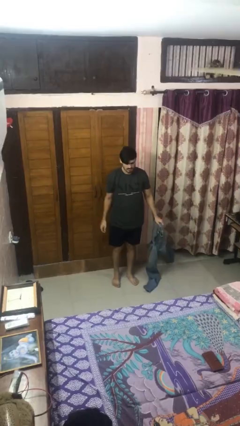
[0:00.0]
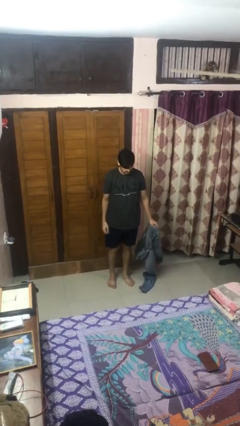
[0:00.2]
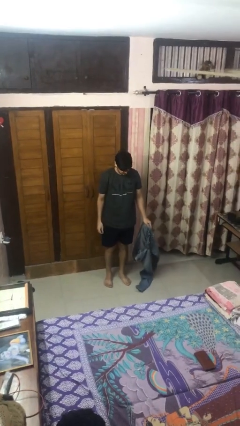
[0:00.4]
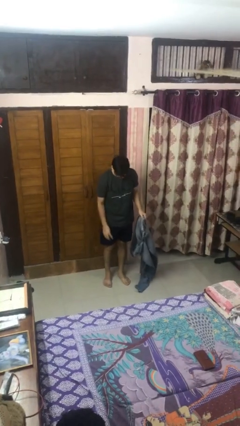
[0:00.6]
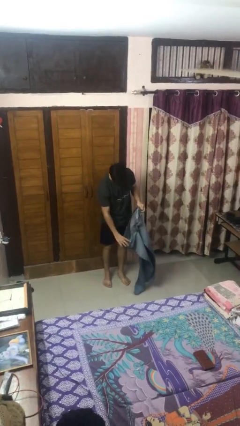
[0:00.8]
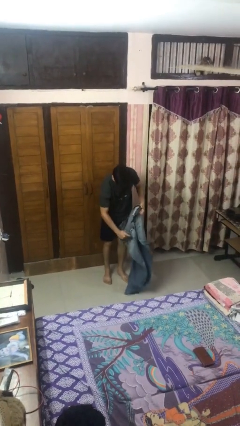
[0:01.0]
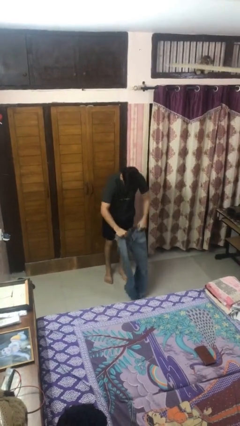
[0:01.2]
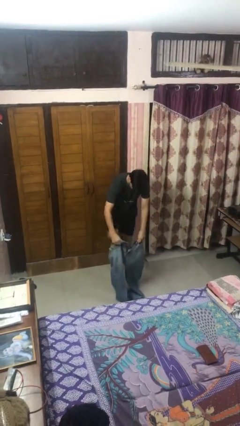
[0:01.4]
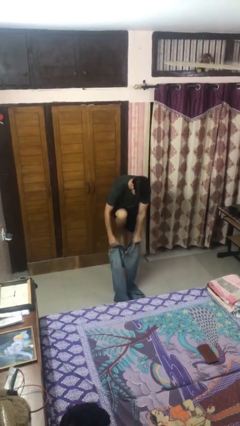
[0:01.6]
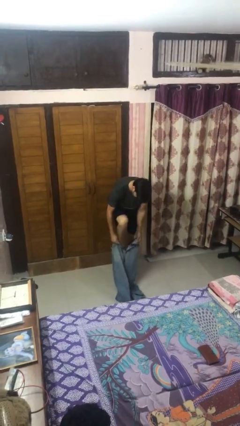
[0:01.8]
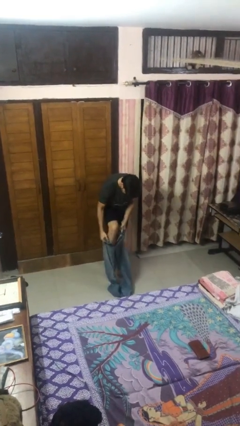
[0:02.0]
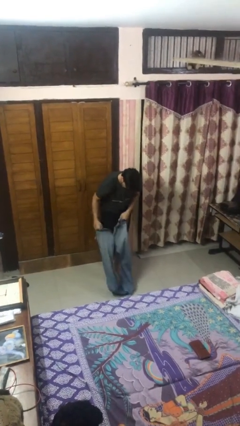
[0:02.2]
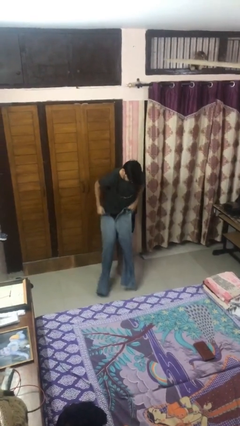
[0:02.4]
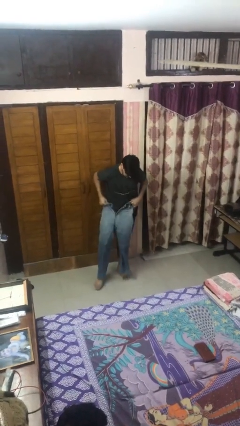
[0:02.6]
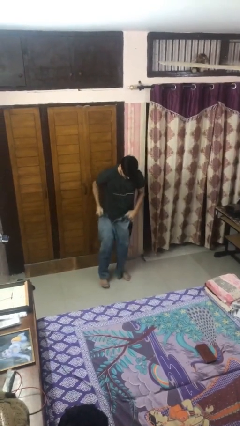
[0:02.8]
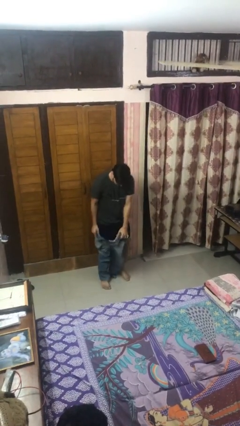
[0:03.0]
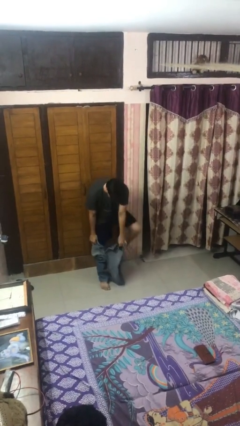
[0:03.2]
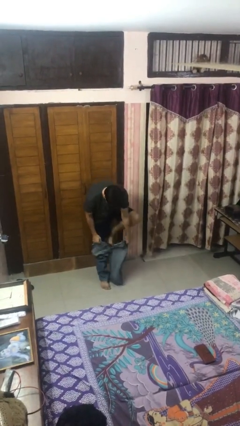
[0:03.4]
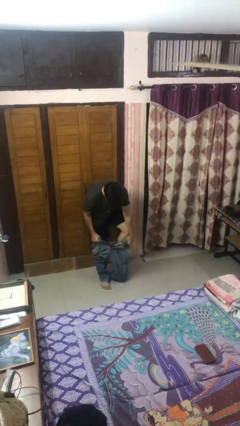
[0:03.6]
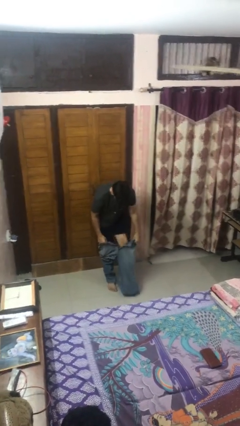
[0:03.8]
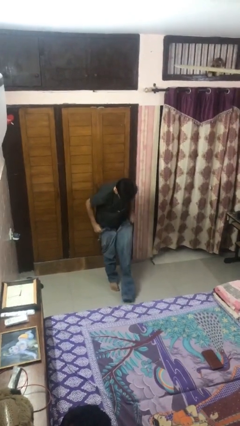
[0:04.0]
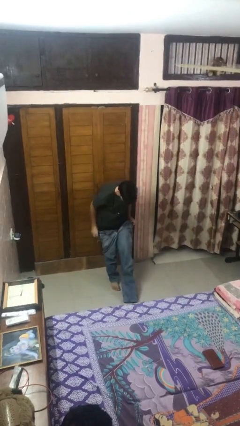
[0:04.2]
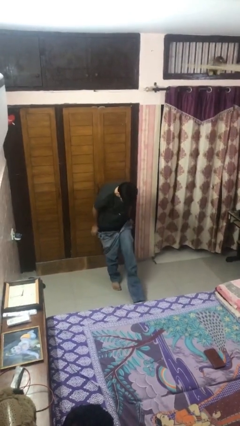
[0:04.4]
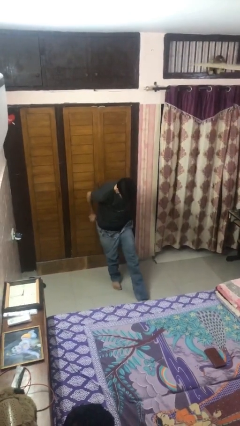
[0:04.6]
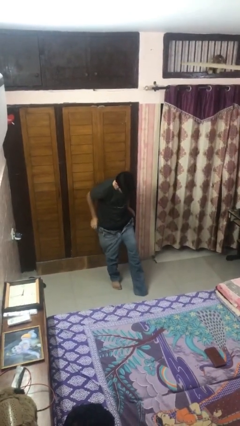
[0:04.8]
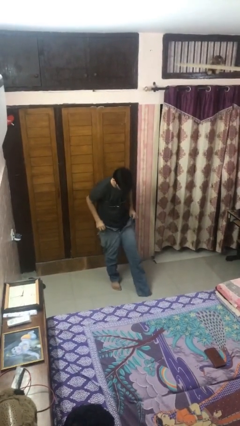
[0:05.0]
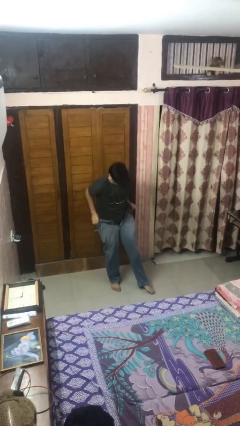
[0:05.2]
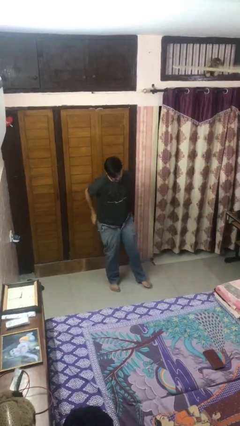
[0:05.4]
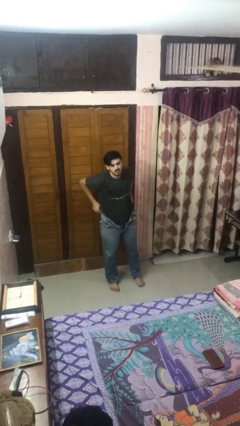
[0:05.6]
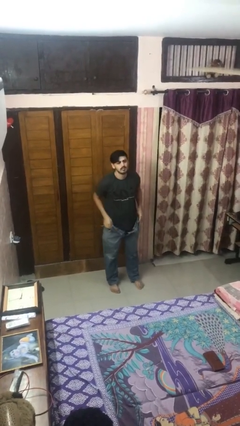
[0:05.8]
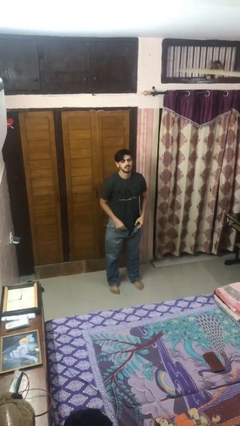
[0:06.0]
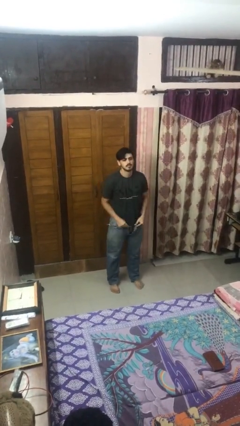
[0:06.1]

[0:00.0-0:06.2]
person puts on pants

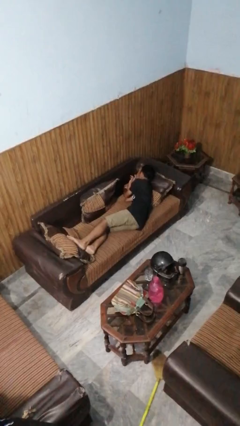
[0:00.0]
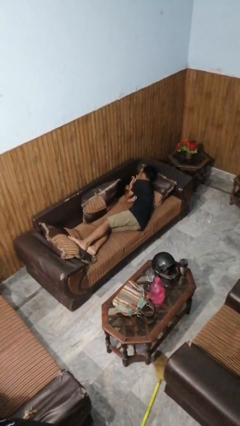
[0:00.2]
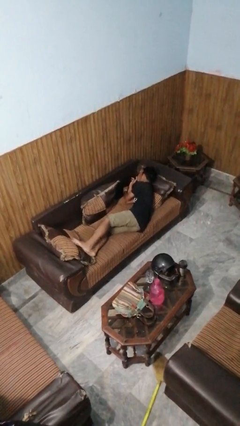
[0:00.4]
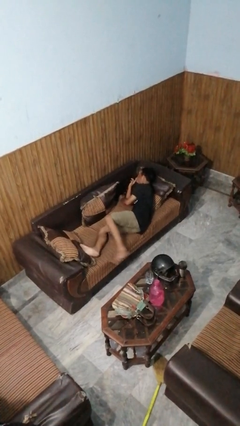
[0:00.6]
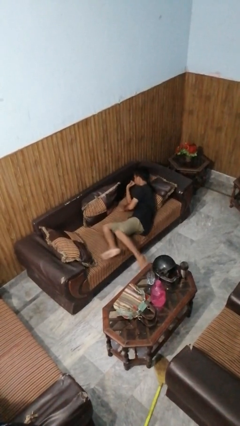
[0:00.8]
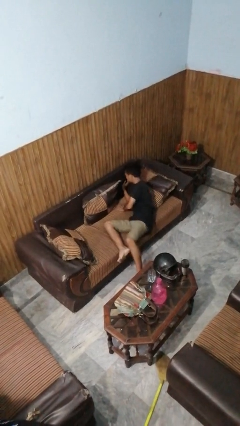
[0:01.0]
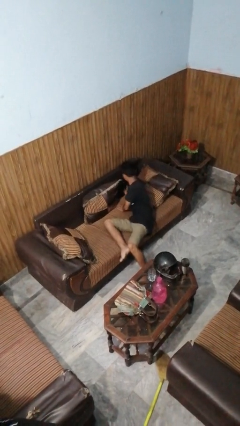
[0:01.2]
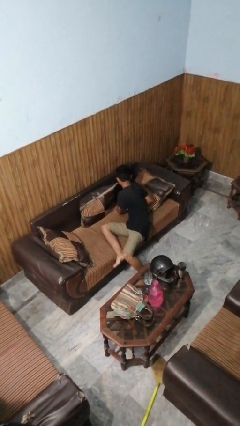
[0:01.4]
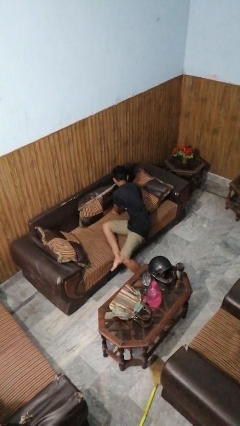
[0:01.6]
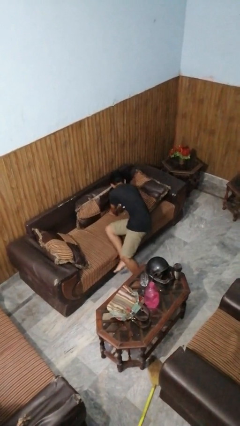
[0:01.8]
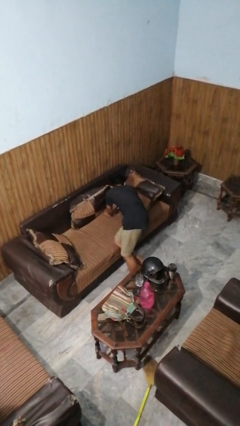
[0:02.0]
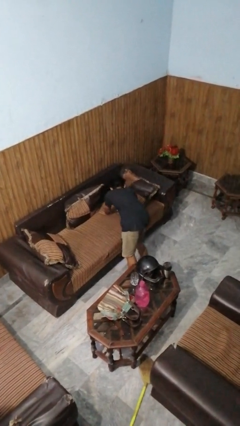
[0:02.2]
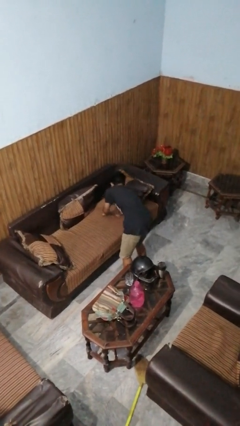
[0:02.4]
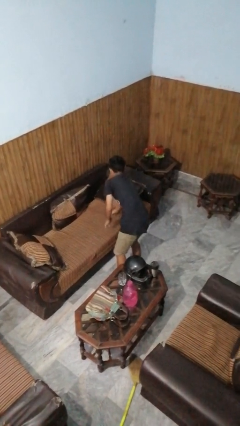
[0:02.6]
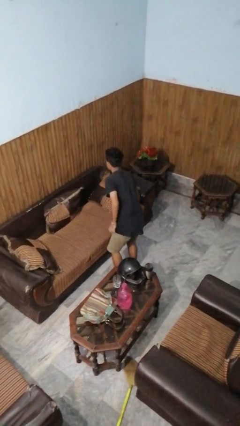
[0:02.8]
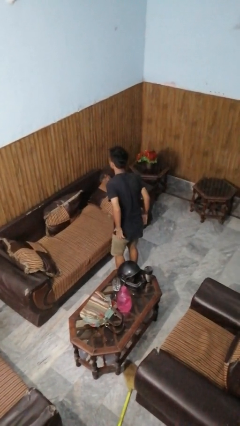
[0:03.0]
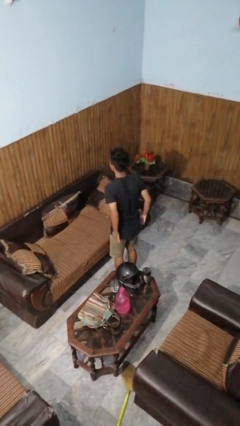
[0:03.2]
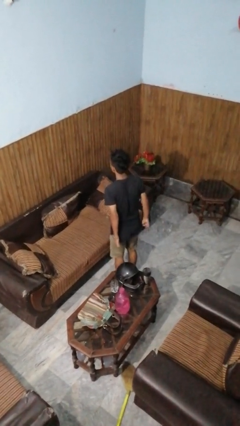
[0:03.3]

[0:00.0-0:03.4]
person stands up

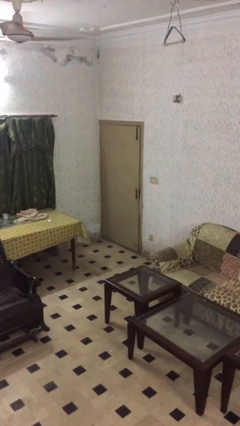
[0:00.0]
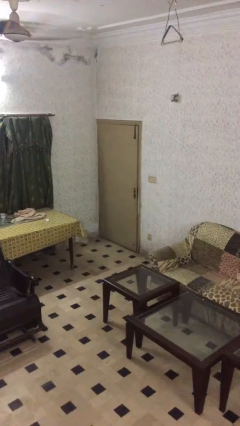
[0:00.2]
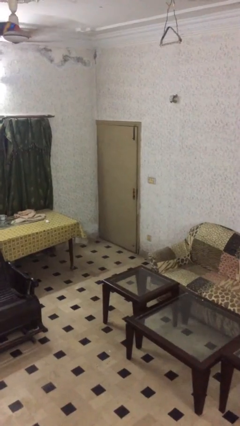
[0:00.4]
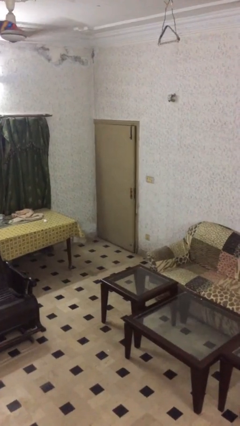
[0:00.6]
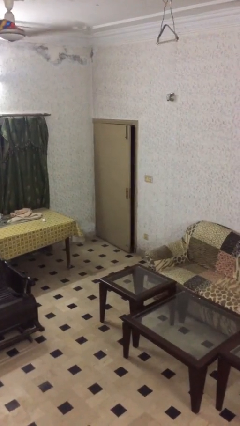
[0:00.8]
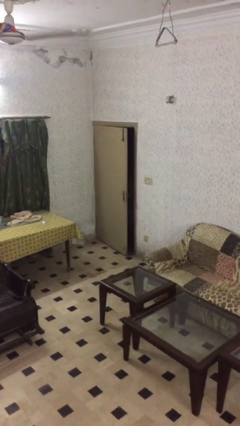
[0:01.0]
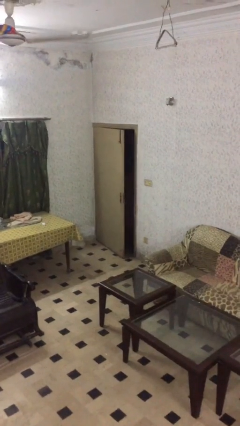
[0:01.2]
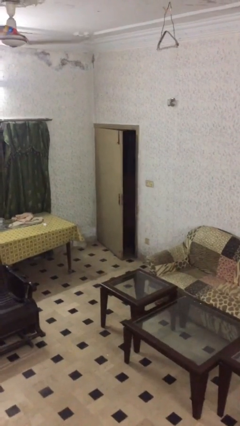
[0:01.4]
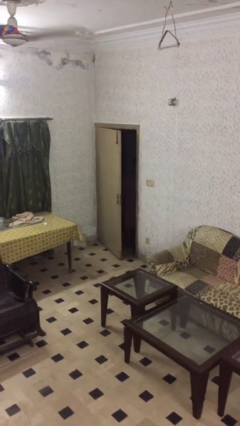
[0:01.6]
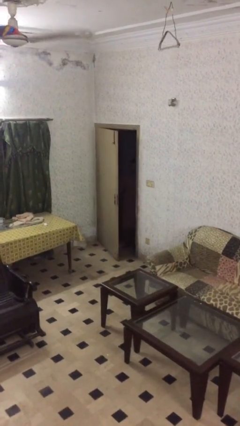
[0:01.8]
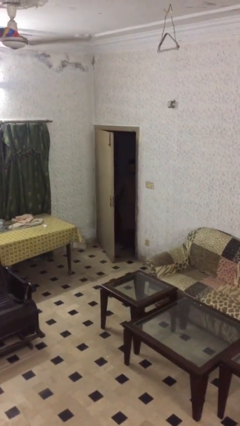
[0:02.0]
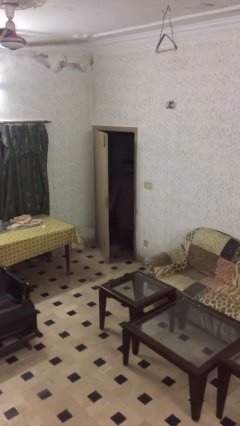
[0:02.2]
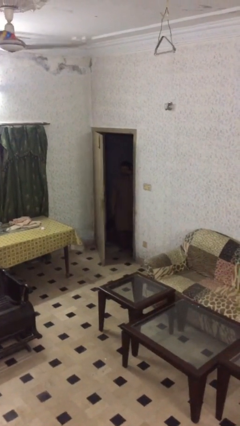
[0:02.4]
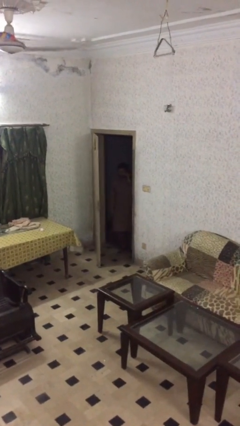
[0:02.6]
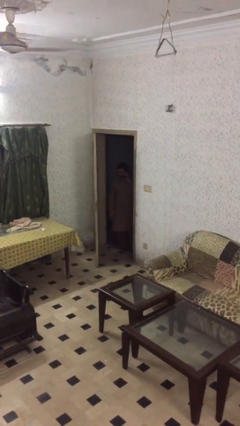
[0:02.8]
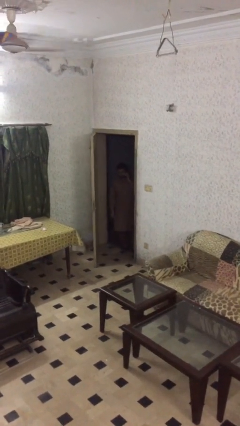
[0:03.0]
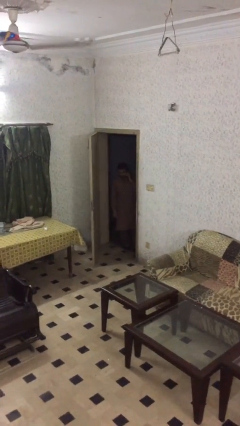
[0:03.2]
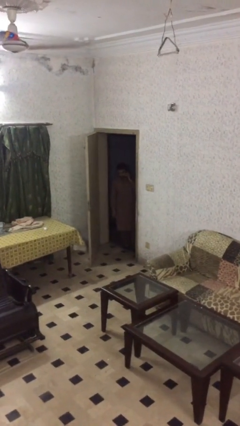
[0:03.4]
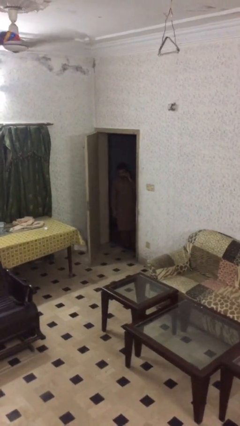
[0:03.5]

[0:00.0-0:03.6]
person opens facility door

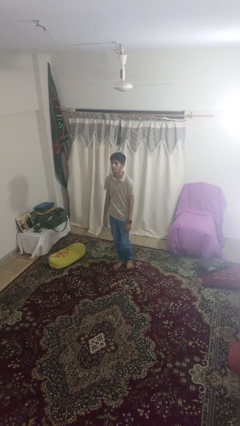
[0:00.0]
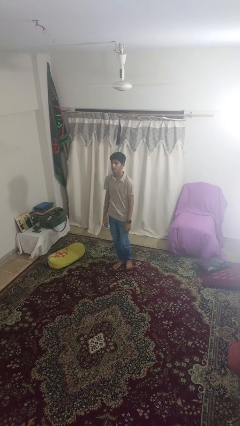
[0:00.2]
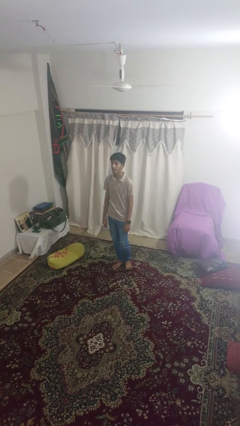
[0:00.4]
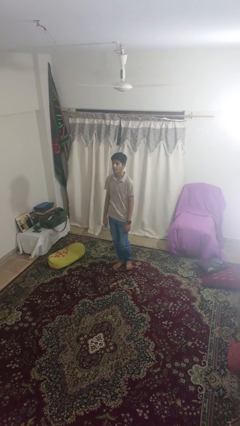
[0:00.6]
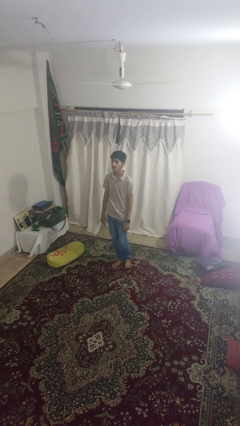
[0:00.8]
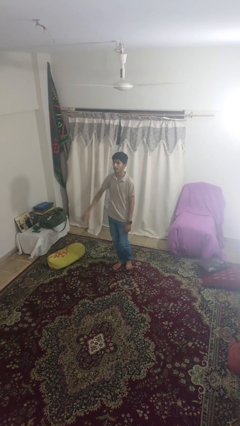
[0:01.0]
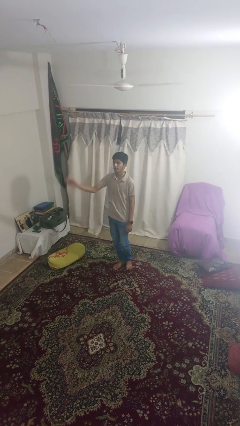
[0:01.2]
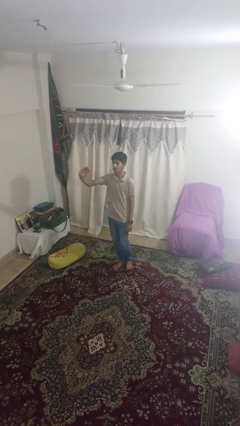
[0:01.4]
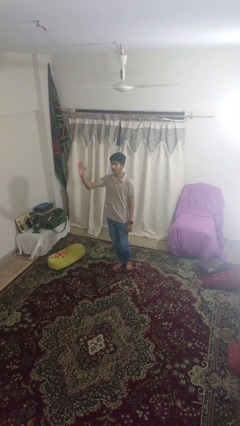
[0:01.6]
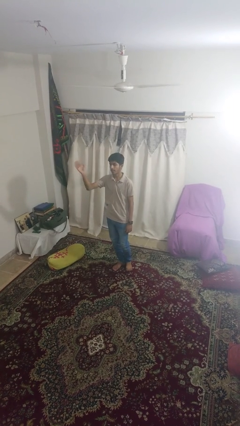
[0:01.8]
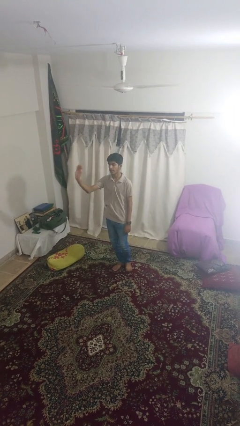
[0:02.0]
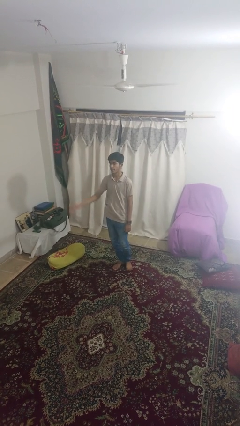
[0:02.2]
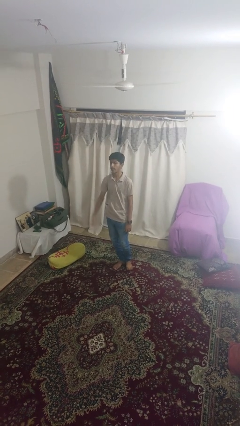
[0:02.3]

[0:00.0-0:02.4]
person waves at person

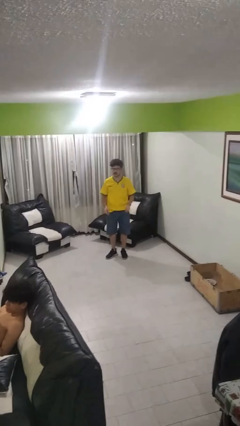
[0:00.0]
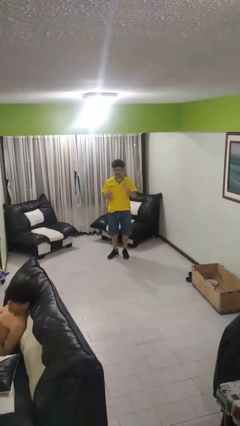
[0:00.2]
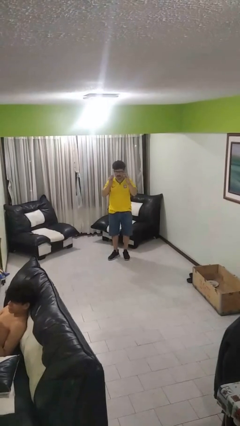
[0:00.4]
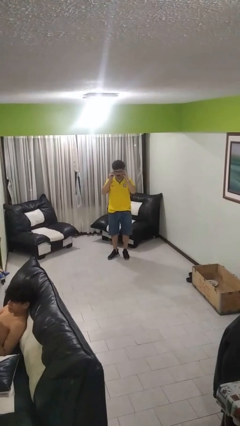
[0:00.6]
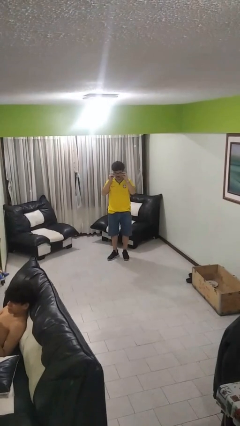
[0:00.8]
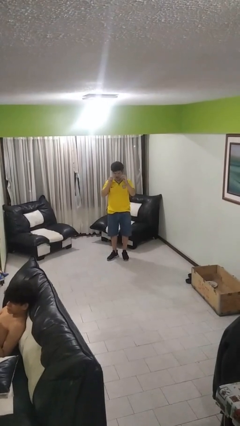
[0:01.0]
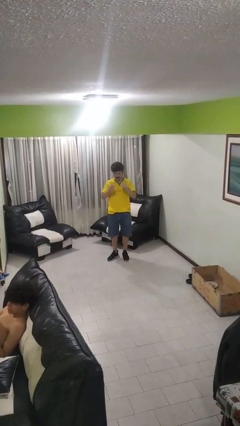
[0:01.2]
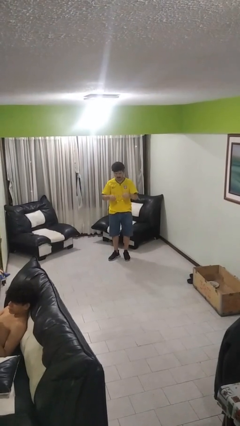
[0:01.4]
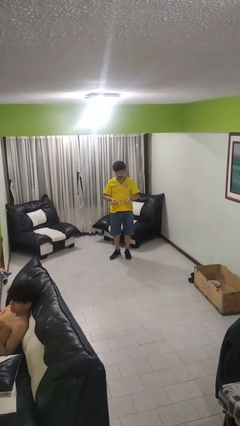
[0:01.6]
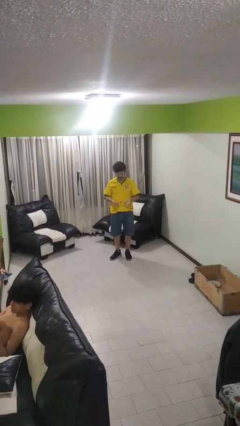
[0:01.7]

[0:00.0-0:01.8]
person takes off glasses

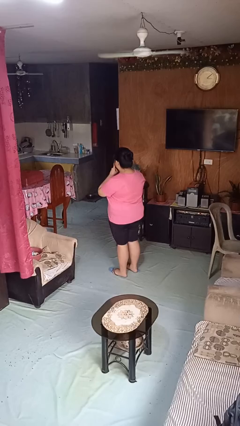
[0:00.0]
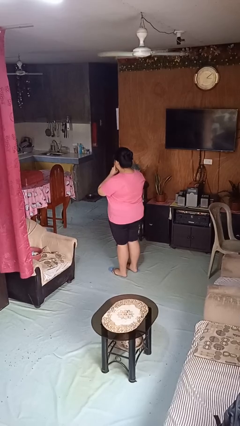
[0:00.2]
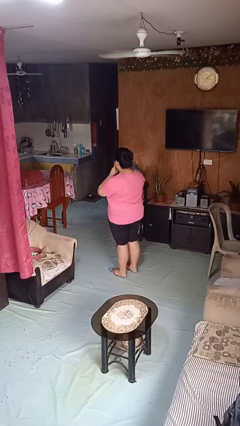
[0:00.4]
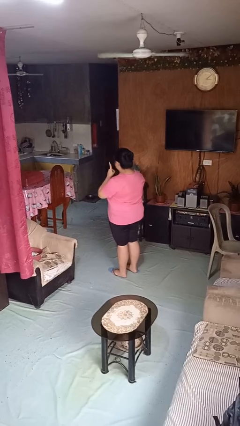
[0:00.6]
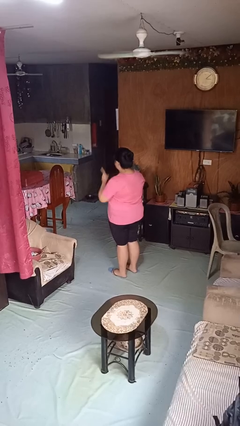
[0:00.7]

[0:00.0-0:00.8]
person gestures be quiet
